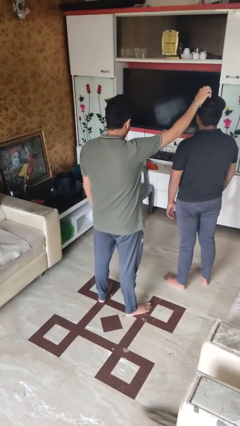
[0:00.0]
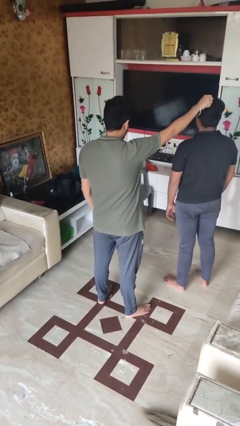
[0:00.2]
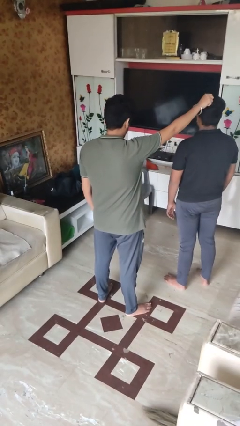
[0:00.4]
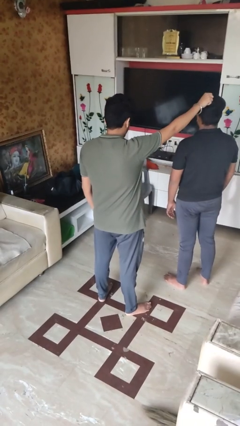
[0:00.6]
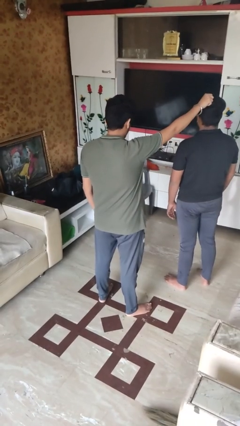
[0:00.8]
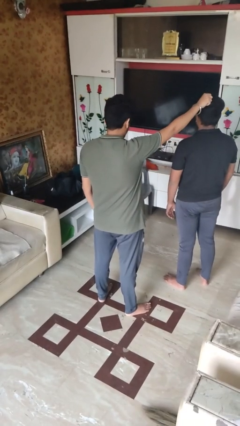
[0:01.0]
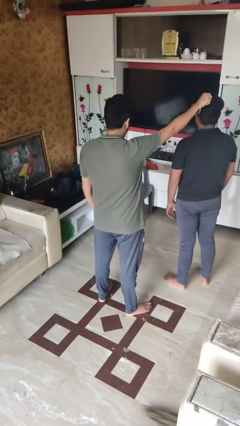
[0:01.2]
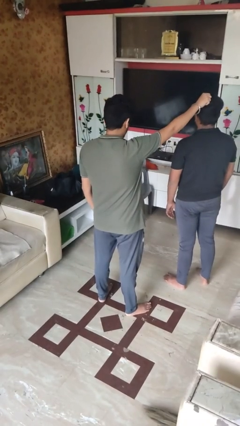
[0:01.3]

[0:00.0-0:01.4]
person grabs person by hair

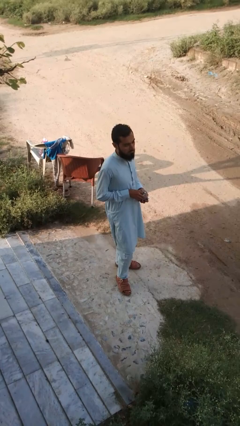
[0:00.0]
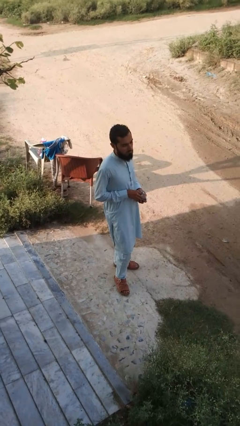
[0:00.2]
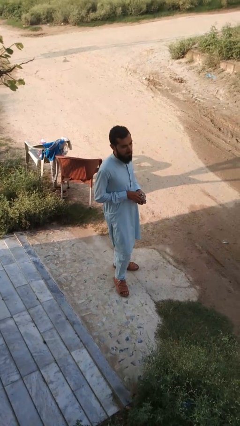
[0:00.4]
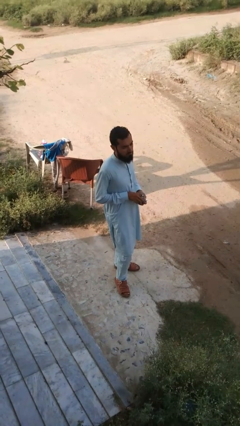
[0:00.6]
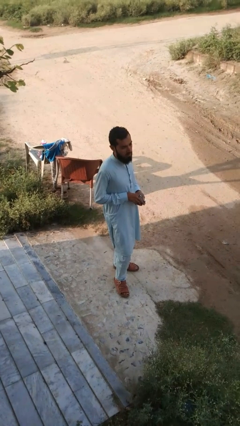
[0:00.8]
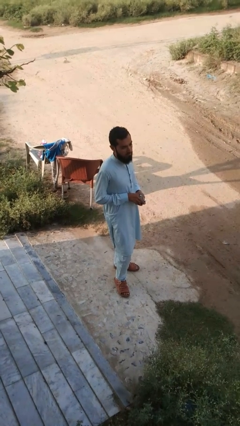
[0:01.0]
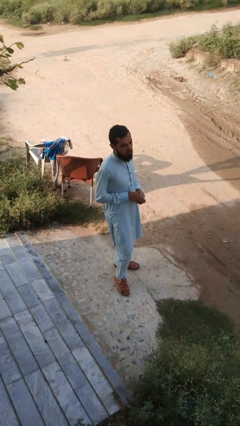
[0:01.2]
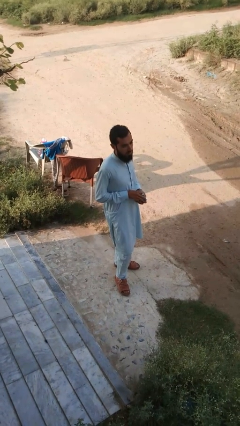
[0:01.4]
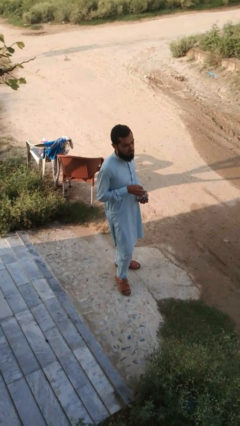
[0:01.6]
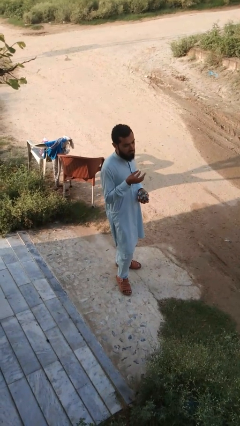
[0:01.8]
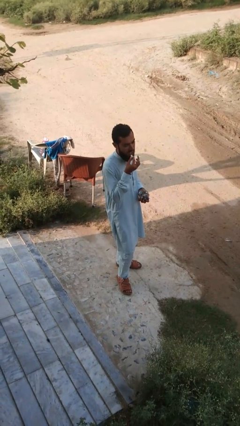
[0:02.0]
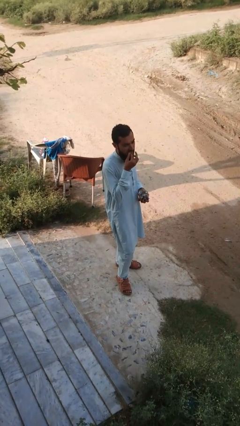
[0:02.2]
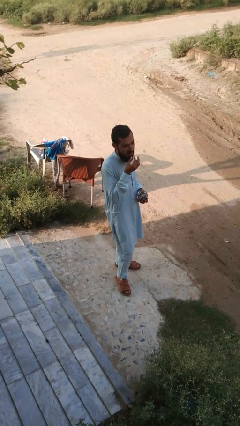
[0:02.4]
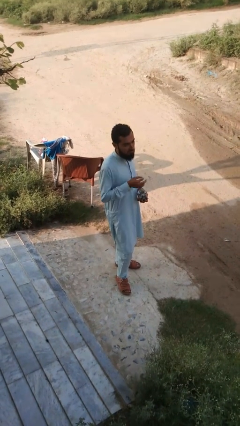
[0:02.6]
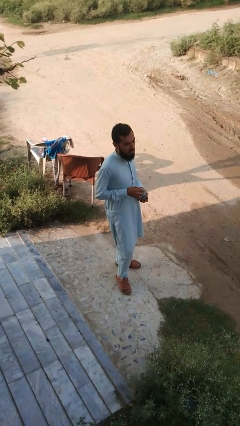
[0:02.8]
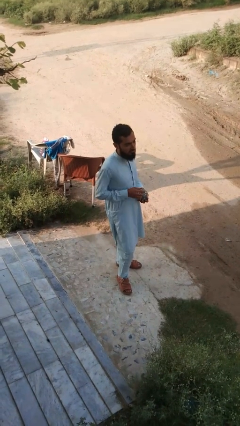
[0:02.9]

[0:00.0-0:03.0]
person eats snack from bag

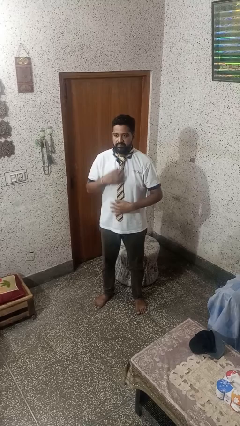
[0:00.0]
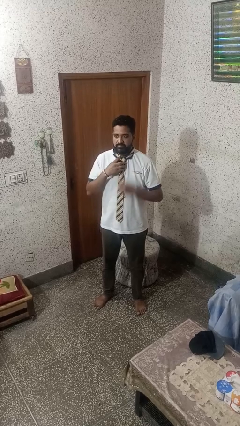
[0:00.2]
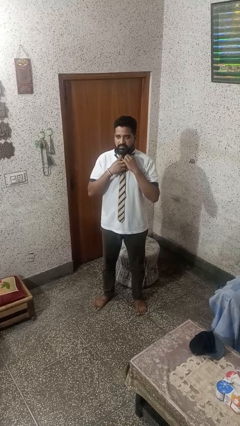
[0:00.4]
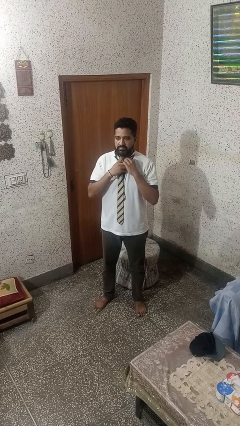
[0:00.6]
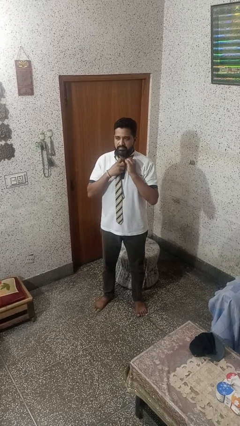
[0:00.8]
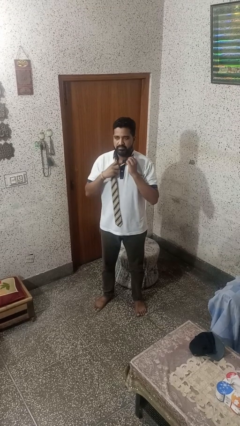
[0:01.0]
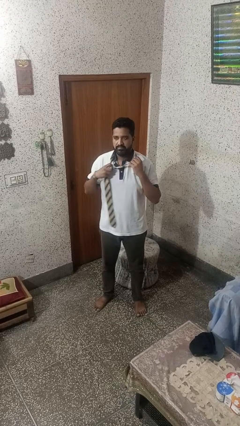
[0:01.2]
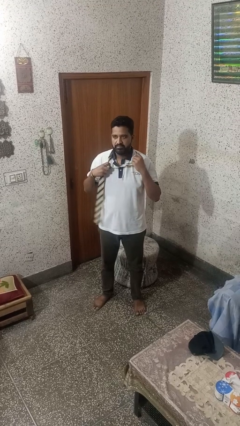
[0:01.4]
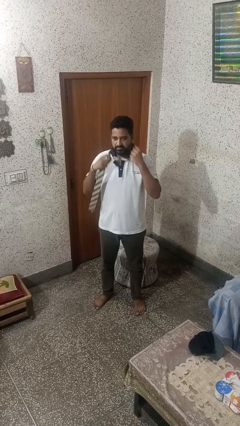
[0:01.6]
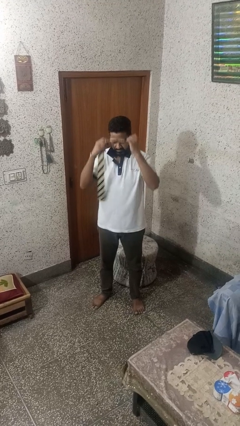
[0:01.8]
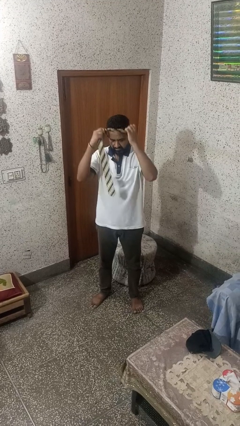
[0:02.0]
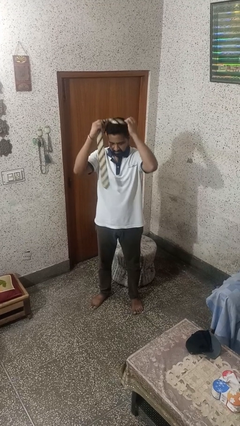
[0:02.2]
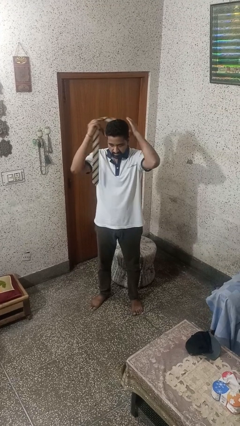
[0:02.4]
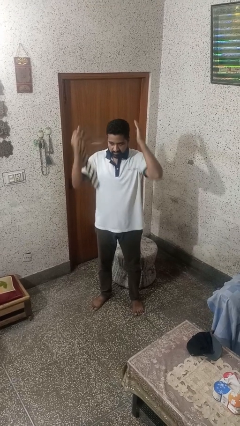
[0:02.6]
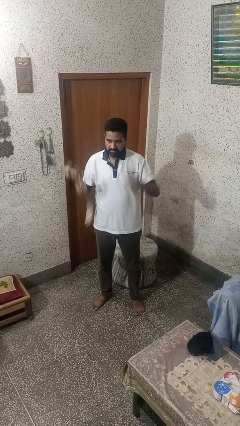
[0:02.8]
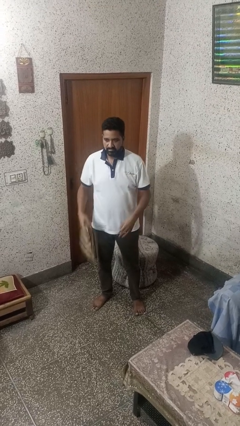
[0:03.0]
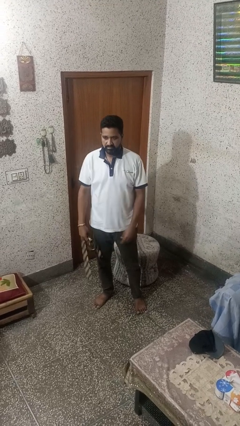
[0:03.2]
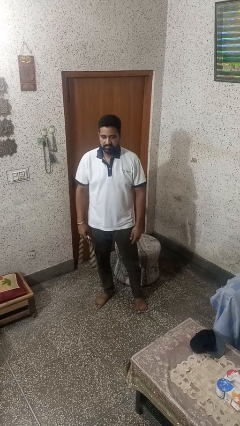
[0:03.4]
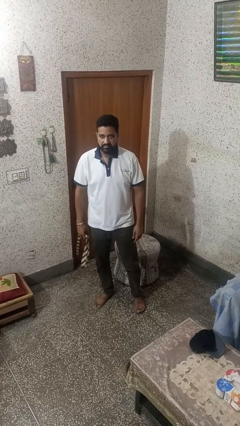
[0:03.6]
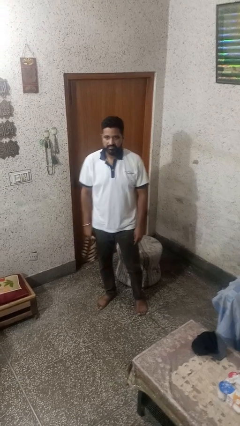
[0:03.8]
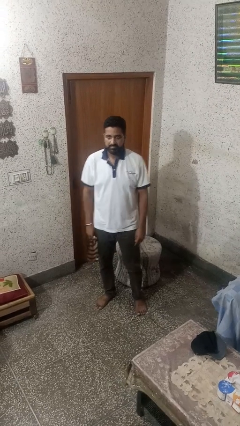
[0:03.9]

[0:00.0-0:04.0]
person takes off necktie

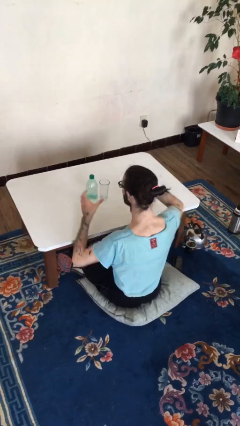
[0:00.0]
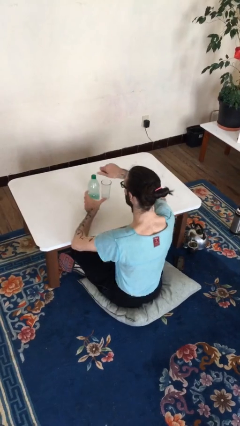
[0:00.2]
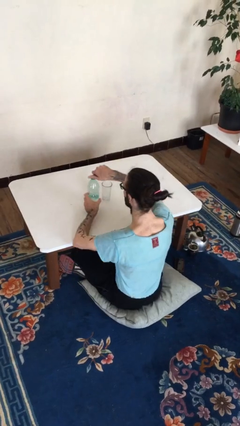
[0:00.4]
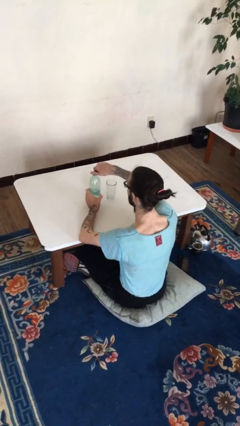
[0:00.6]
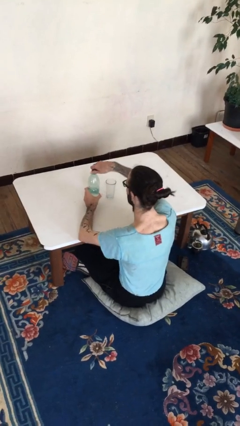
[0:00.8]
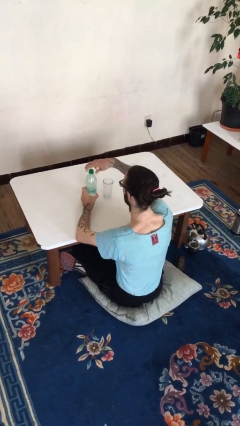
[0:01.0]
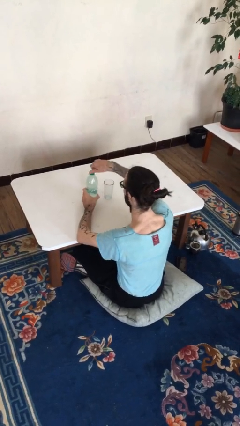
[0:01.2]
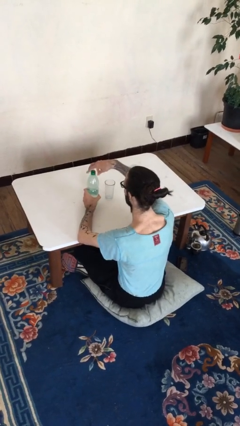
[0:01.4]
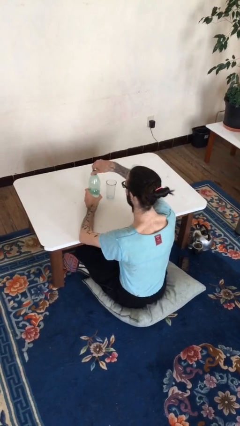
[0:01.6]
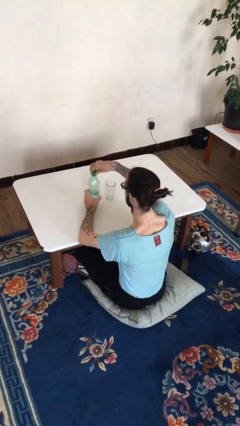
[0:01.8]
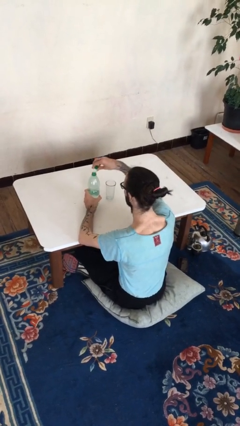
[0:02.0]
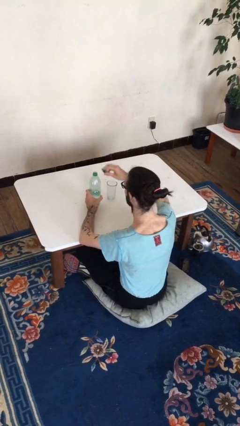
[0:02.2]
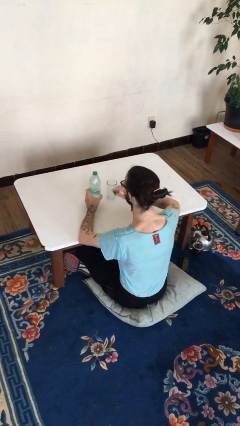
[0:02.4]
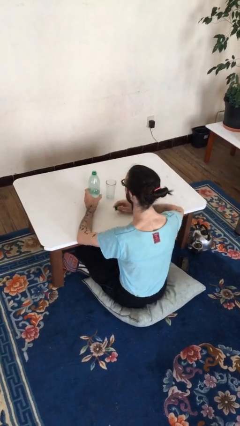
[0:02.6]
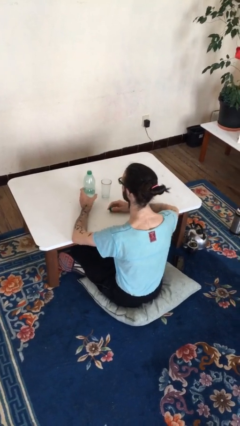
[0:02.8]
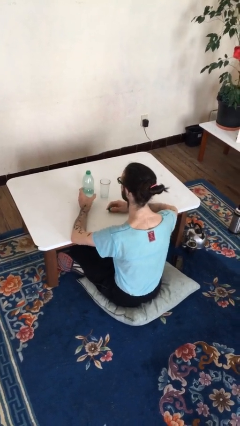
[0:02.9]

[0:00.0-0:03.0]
person unscrews lid from bottle

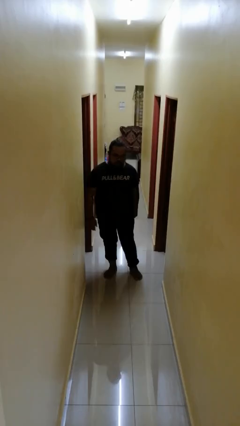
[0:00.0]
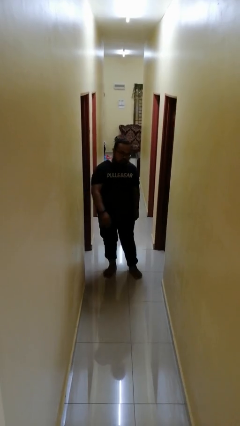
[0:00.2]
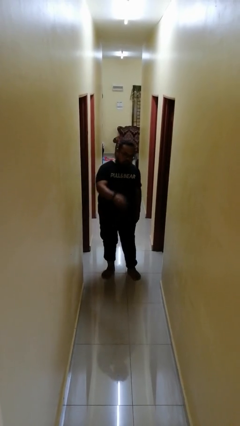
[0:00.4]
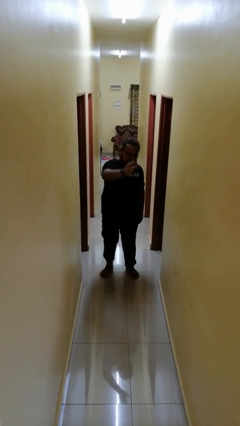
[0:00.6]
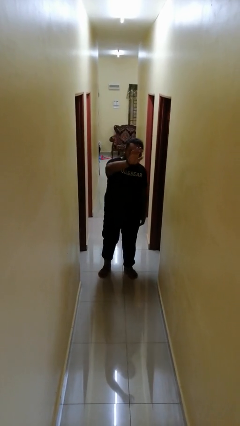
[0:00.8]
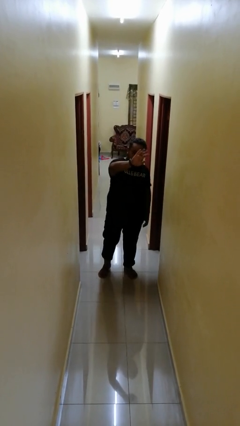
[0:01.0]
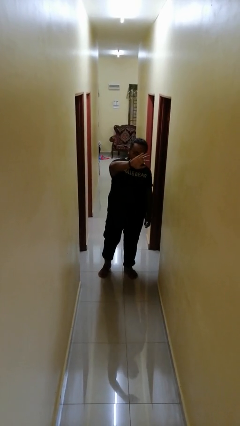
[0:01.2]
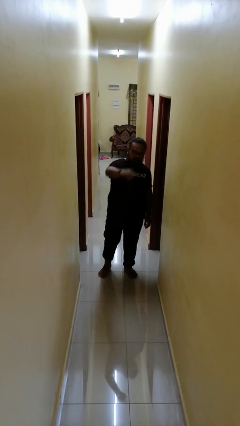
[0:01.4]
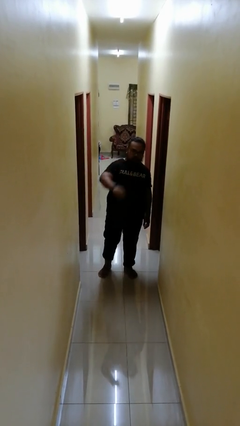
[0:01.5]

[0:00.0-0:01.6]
person waves at person

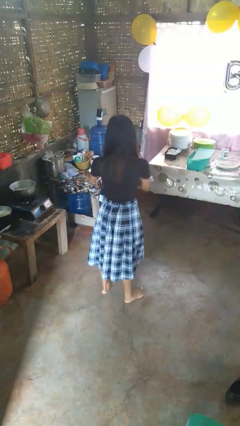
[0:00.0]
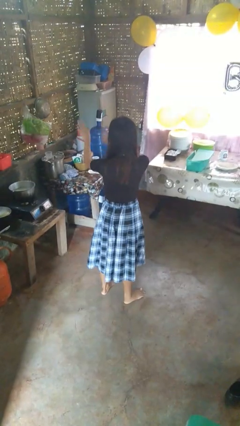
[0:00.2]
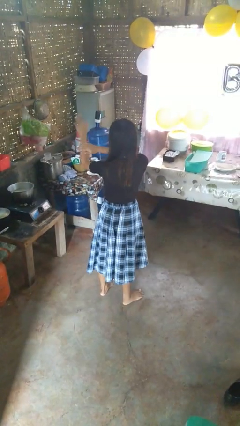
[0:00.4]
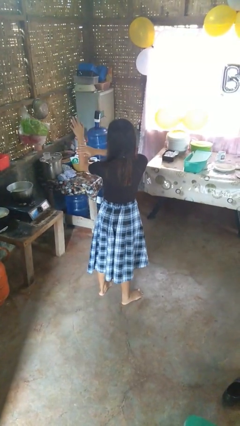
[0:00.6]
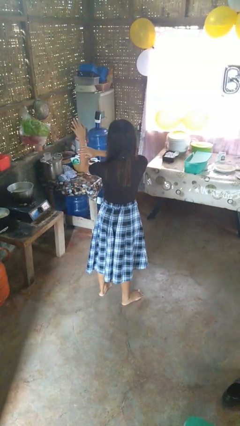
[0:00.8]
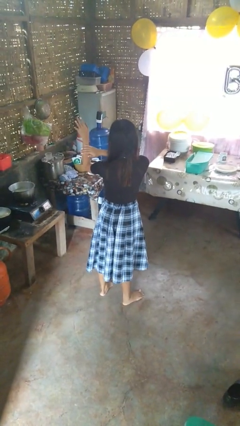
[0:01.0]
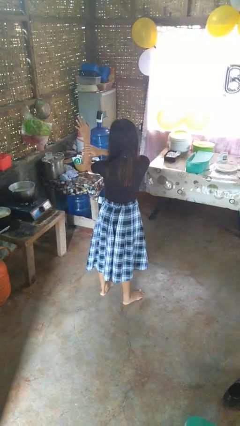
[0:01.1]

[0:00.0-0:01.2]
person swats bug

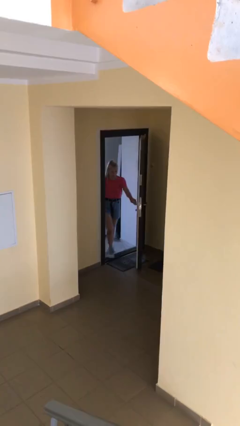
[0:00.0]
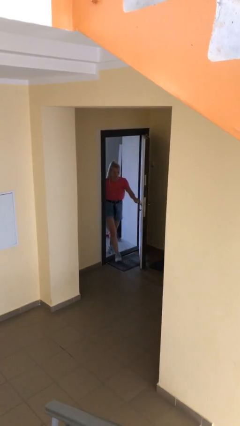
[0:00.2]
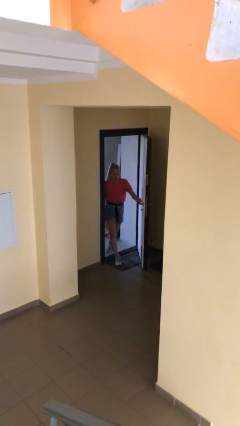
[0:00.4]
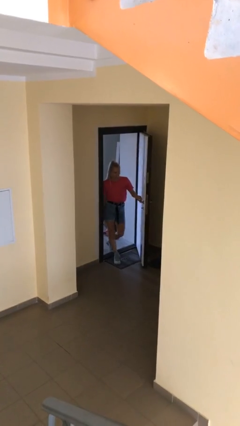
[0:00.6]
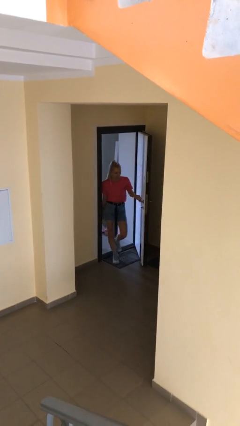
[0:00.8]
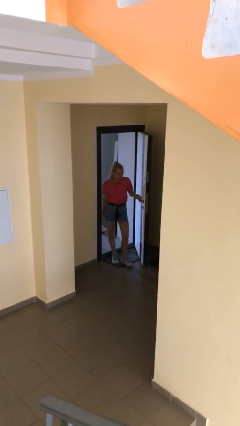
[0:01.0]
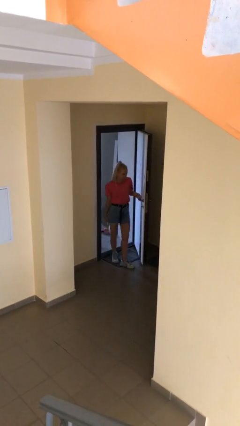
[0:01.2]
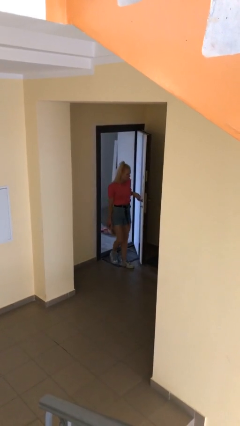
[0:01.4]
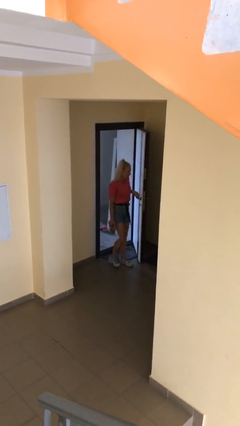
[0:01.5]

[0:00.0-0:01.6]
person enters scene through structure

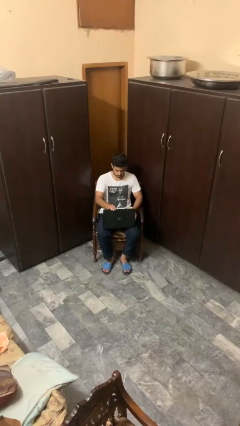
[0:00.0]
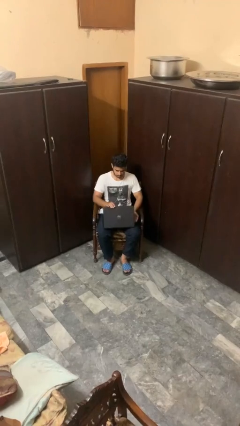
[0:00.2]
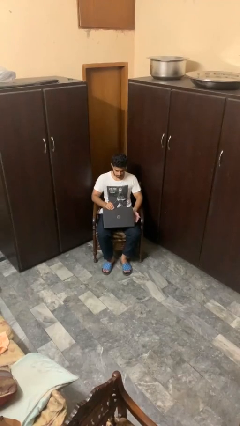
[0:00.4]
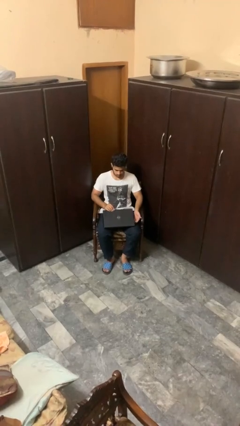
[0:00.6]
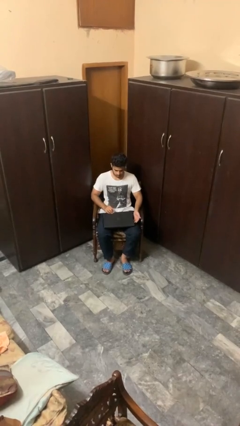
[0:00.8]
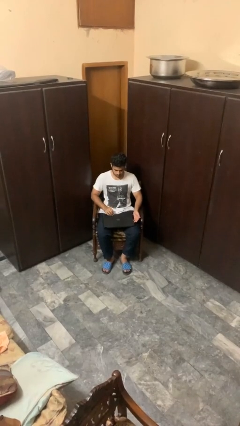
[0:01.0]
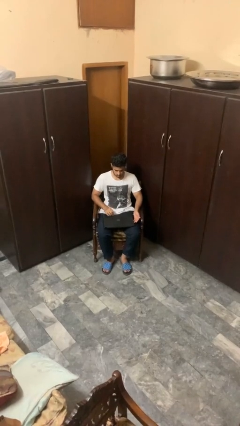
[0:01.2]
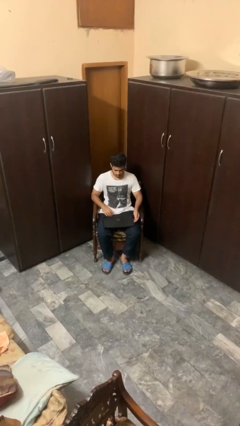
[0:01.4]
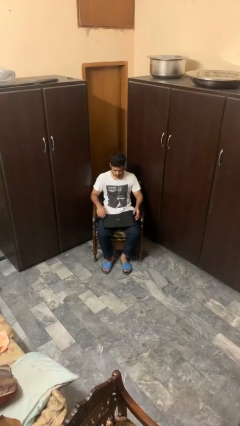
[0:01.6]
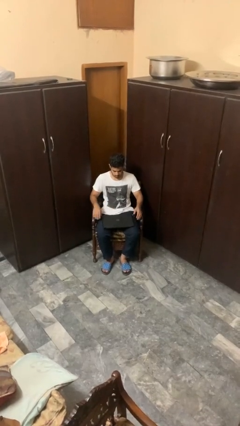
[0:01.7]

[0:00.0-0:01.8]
person closes laptop
